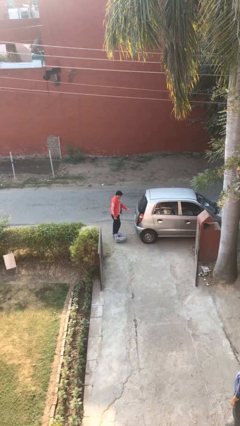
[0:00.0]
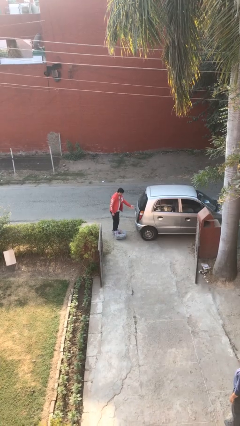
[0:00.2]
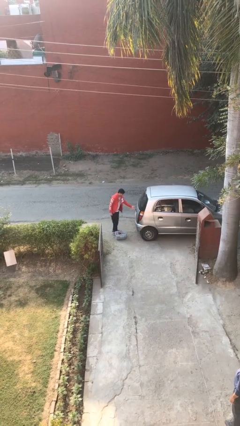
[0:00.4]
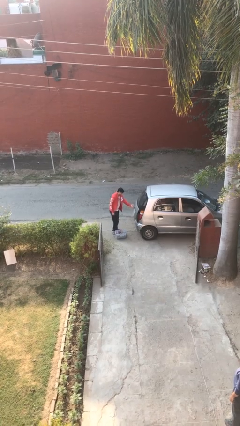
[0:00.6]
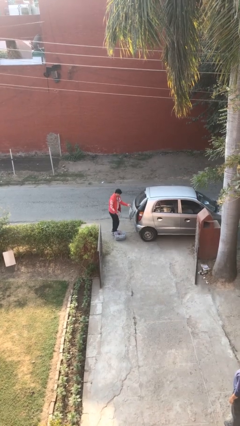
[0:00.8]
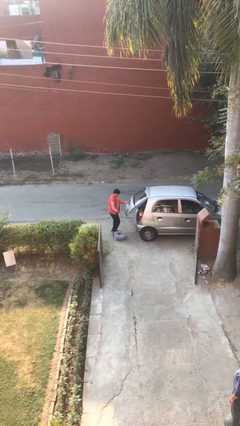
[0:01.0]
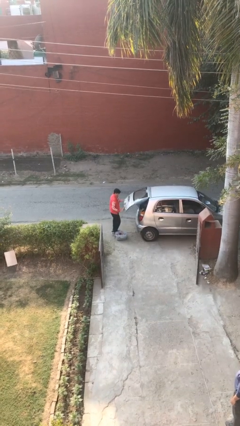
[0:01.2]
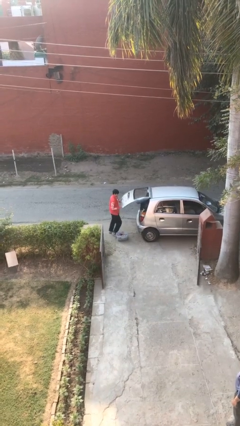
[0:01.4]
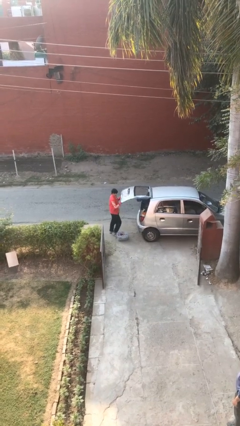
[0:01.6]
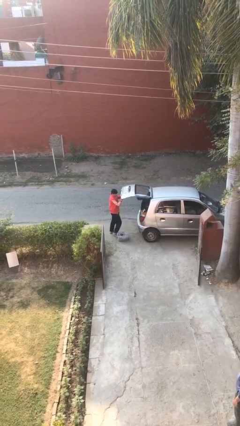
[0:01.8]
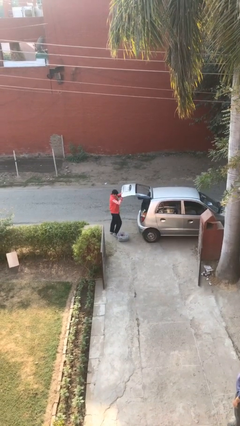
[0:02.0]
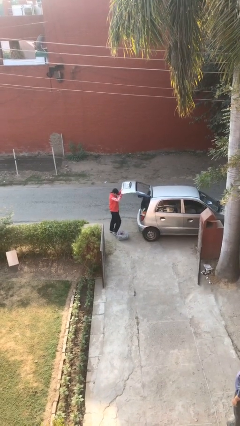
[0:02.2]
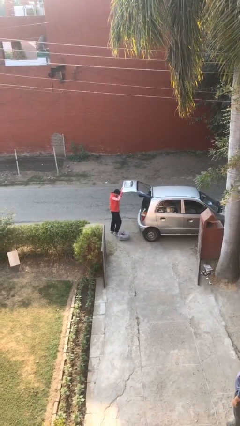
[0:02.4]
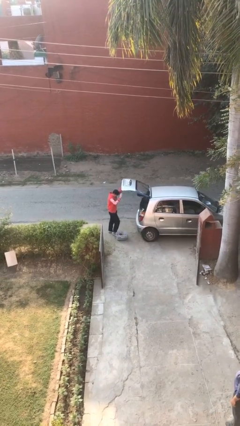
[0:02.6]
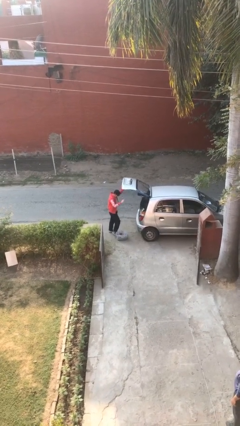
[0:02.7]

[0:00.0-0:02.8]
person opens car trunk

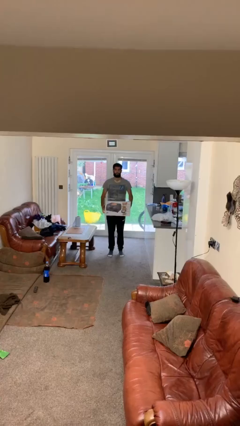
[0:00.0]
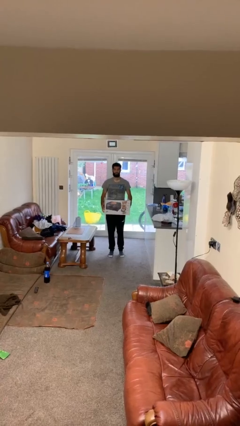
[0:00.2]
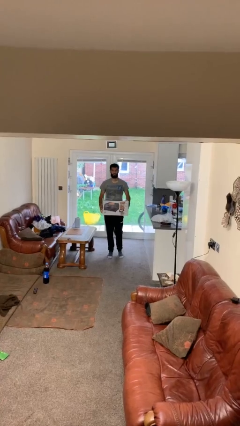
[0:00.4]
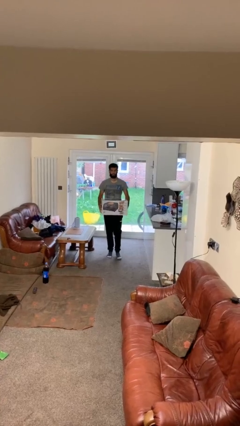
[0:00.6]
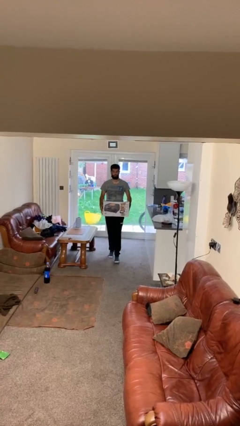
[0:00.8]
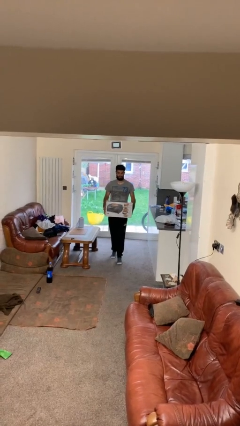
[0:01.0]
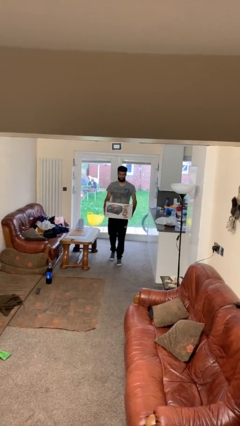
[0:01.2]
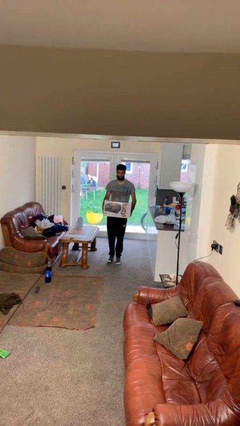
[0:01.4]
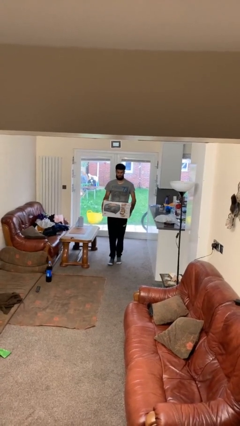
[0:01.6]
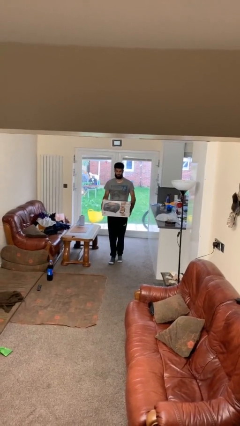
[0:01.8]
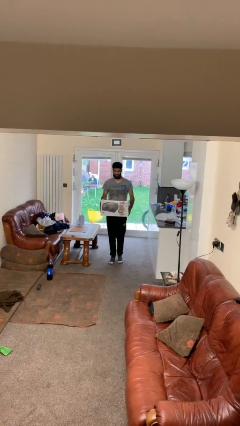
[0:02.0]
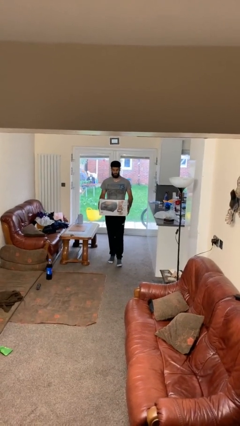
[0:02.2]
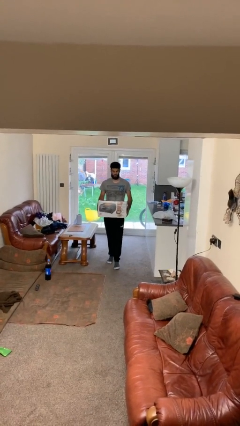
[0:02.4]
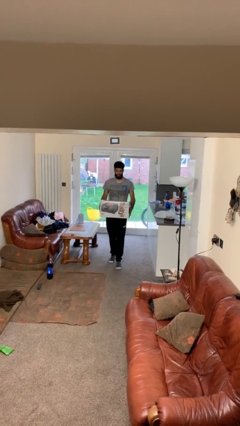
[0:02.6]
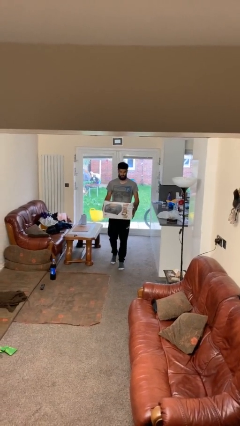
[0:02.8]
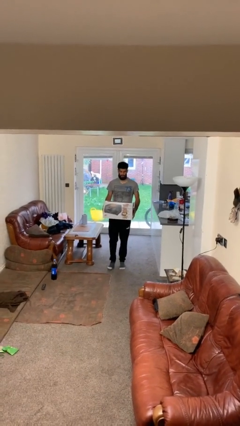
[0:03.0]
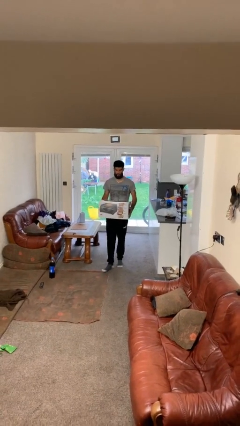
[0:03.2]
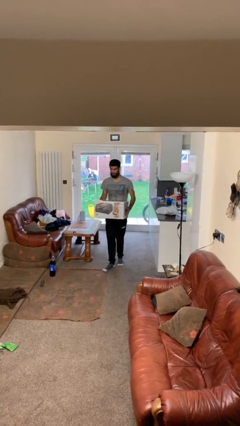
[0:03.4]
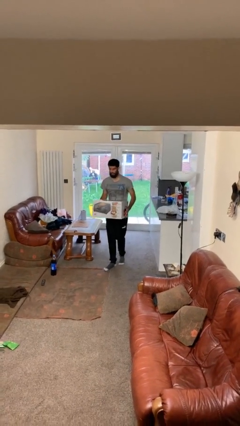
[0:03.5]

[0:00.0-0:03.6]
person carries heavy object

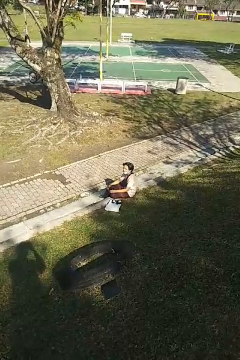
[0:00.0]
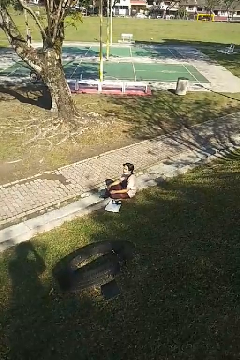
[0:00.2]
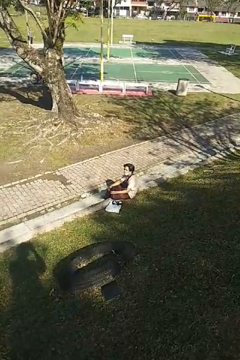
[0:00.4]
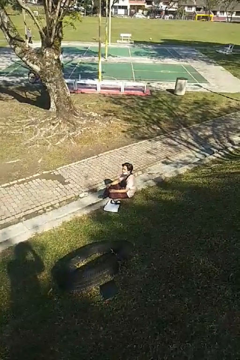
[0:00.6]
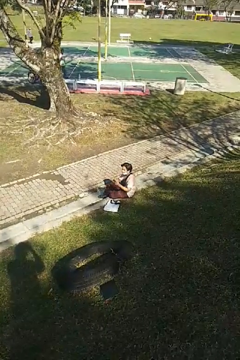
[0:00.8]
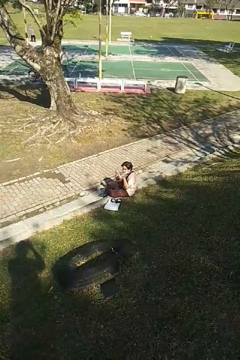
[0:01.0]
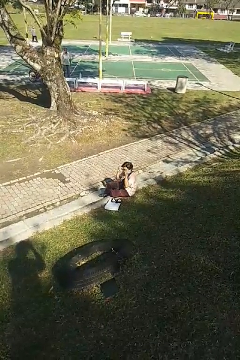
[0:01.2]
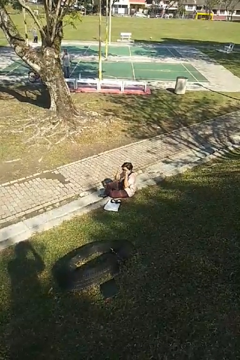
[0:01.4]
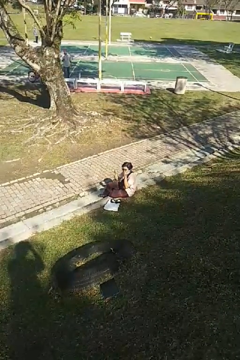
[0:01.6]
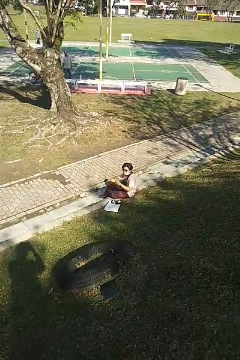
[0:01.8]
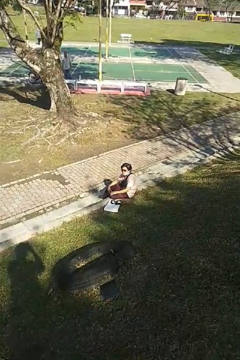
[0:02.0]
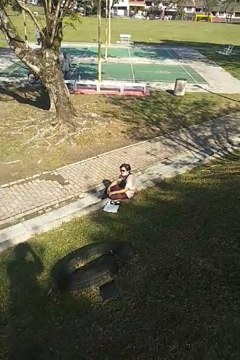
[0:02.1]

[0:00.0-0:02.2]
person puts on sunglasses

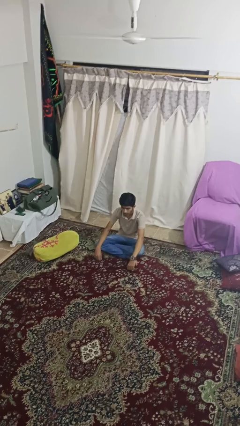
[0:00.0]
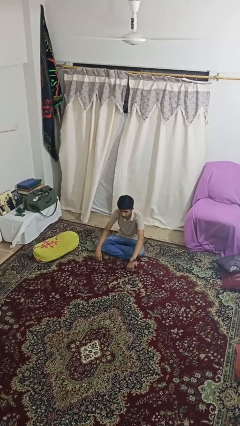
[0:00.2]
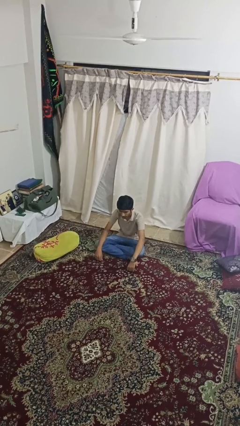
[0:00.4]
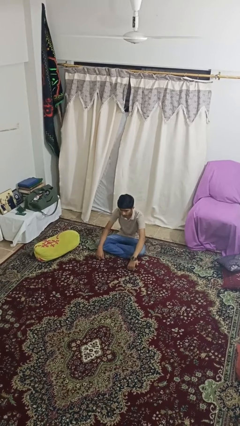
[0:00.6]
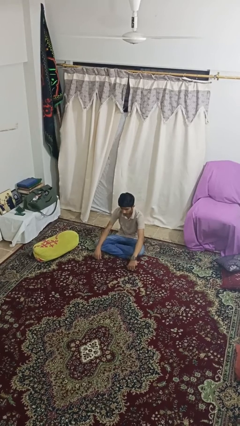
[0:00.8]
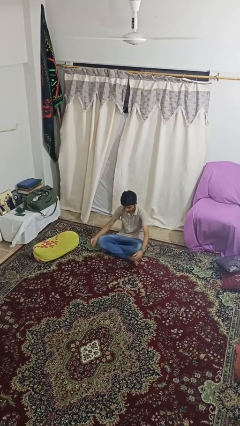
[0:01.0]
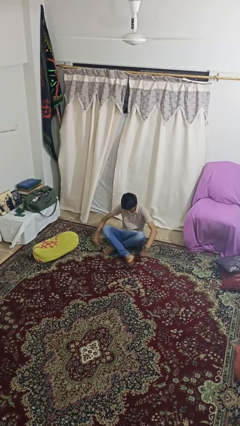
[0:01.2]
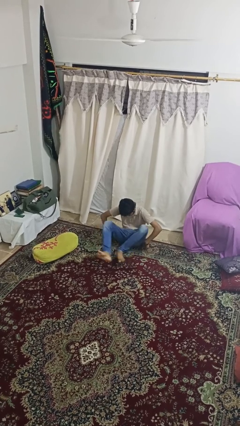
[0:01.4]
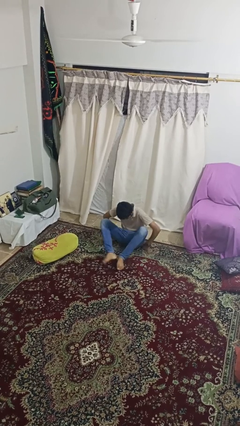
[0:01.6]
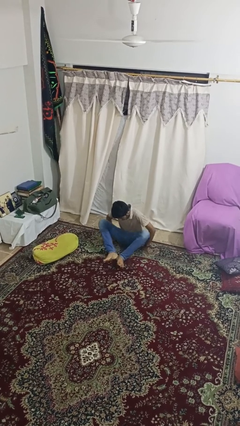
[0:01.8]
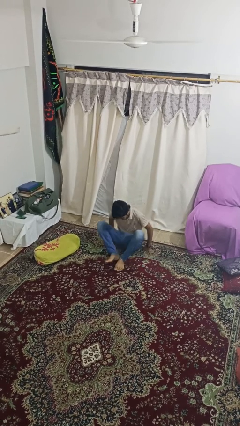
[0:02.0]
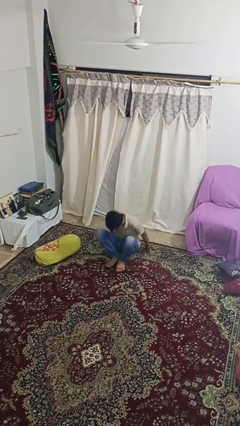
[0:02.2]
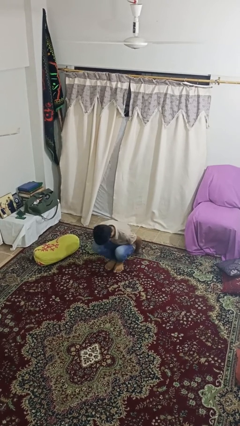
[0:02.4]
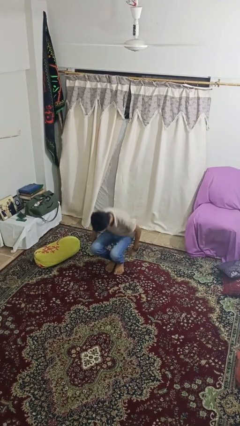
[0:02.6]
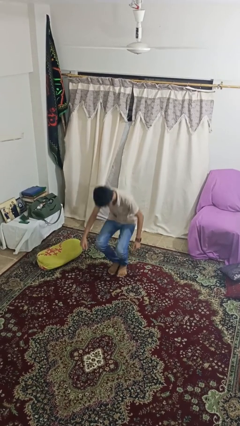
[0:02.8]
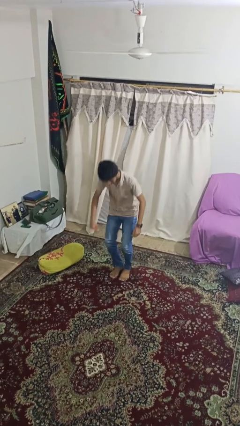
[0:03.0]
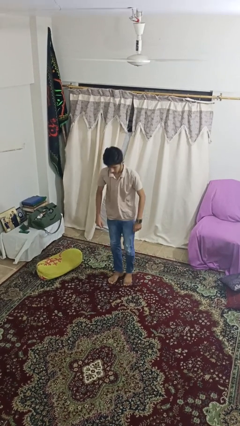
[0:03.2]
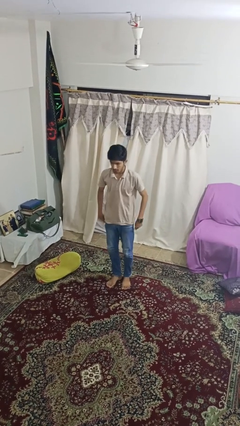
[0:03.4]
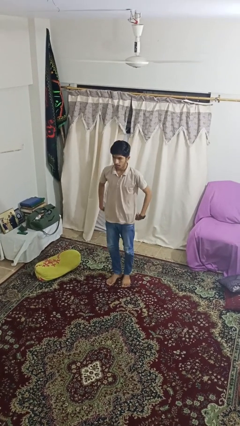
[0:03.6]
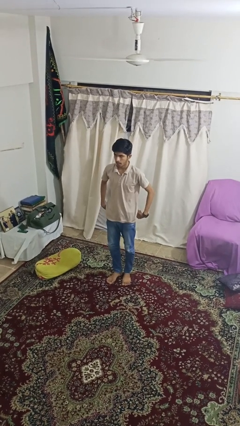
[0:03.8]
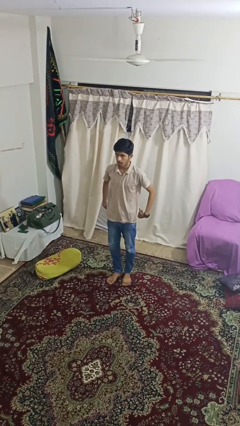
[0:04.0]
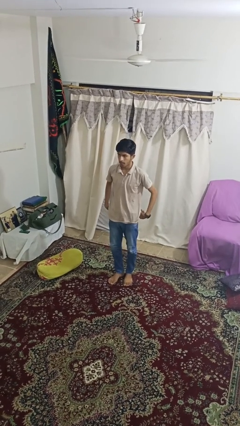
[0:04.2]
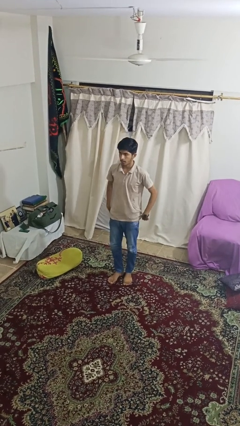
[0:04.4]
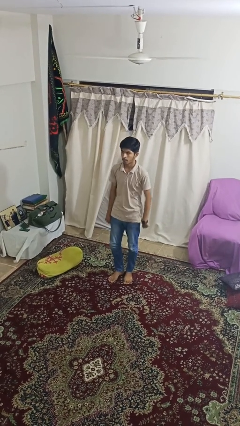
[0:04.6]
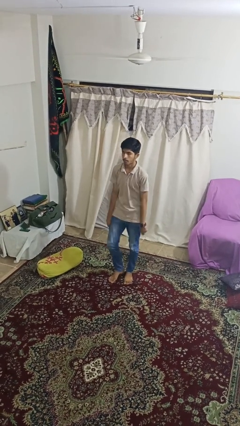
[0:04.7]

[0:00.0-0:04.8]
person stands up from floor

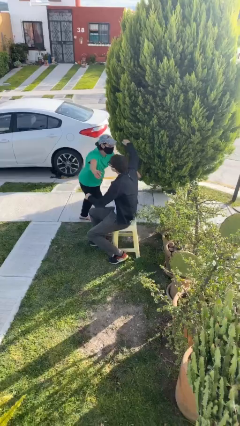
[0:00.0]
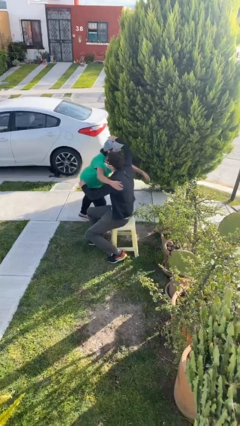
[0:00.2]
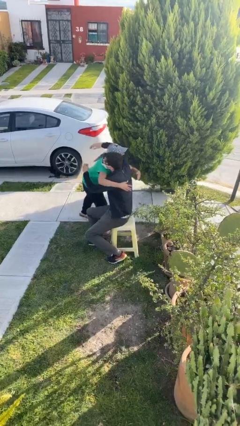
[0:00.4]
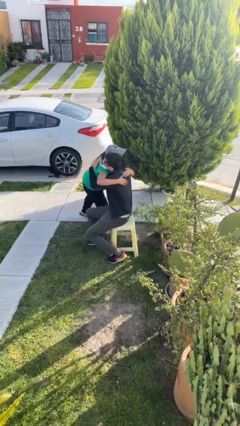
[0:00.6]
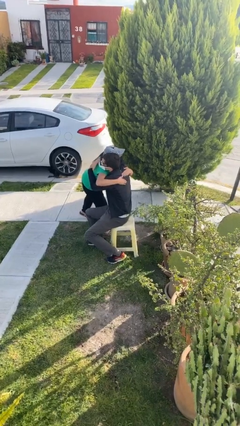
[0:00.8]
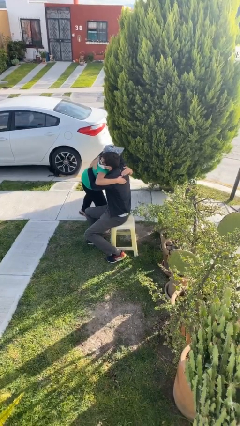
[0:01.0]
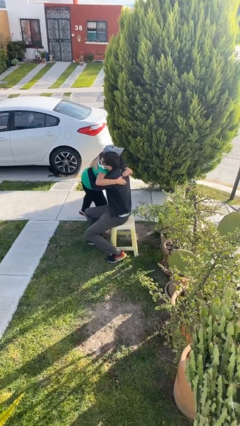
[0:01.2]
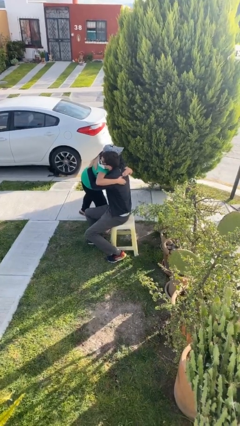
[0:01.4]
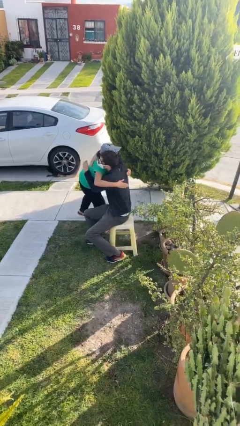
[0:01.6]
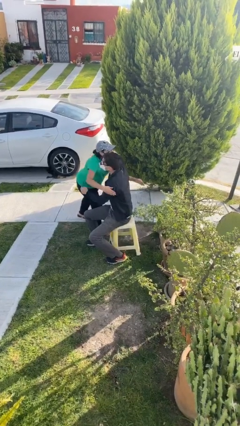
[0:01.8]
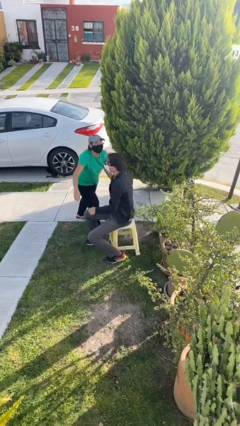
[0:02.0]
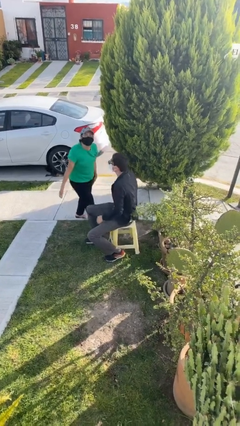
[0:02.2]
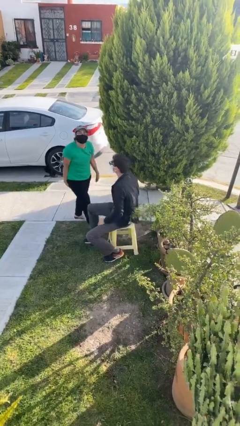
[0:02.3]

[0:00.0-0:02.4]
person embraces person

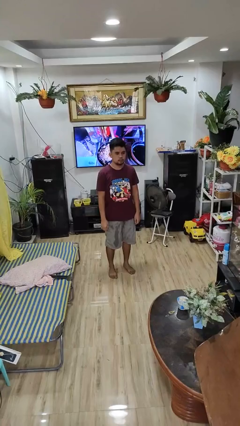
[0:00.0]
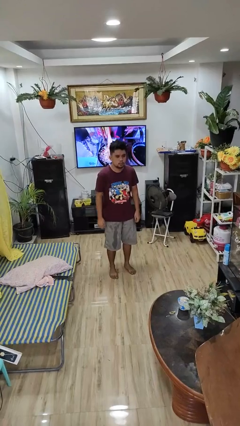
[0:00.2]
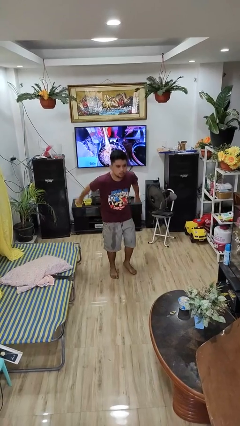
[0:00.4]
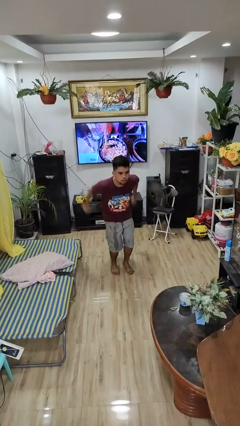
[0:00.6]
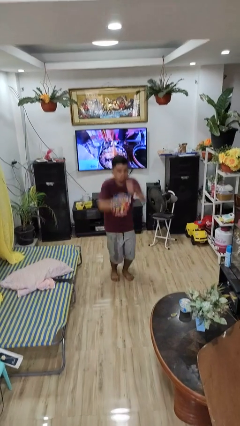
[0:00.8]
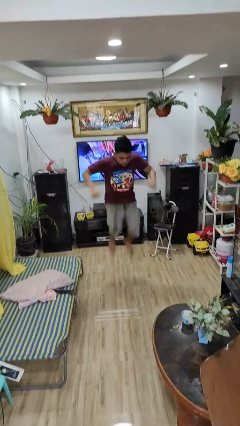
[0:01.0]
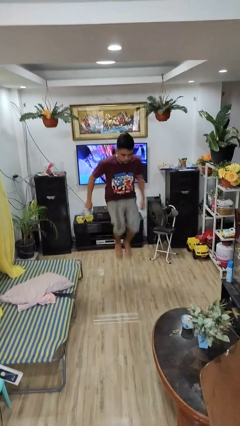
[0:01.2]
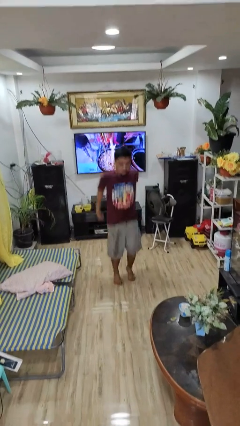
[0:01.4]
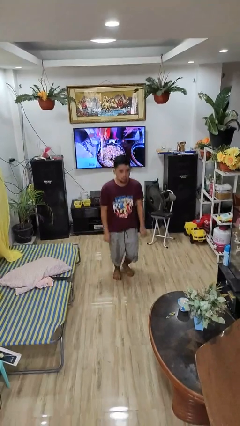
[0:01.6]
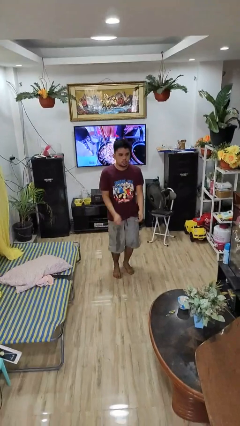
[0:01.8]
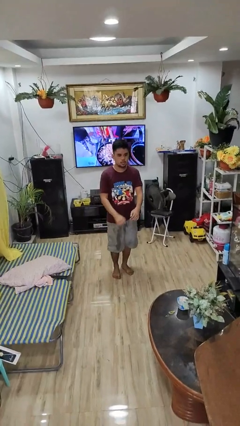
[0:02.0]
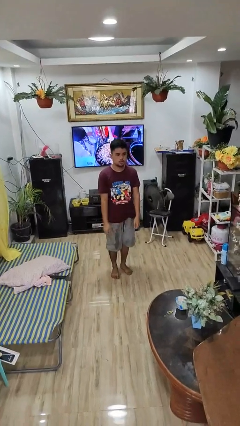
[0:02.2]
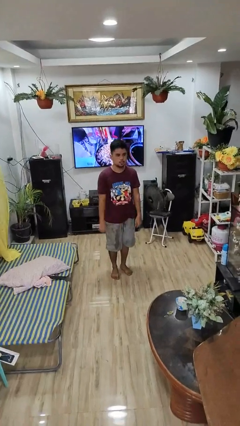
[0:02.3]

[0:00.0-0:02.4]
person jumps
